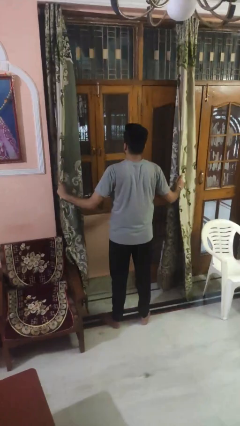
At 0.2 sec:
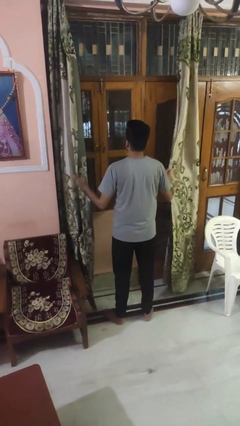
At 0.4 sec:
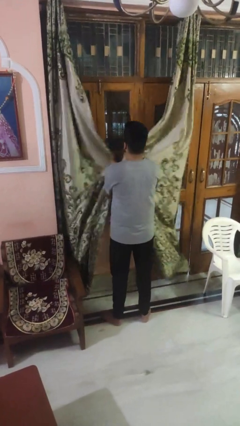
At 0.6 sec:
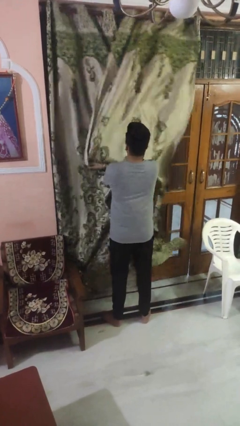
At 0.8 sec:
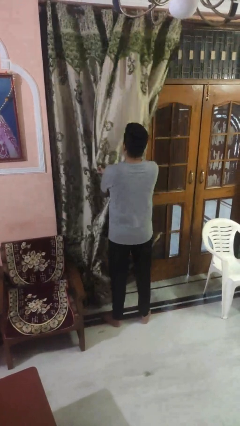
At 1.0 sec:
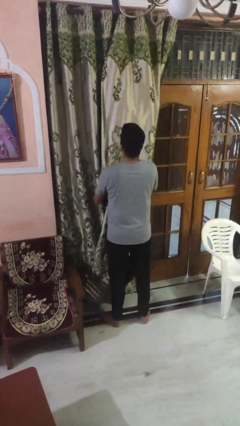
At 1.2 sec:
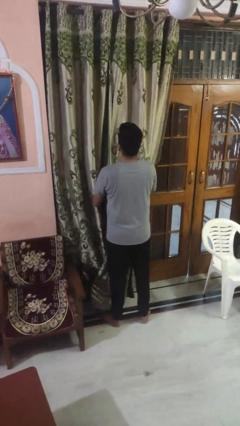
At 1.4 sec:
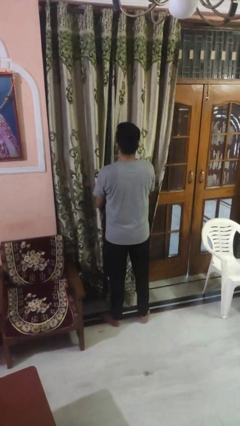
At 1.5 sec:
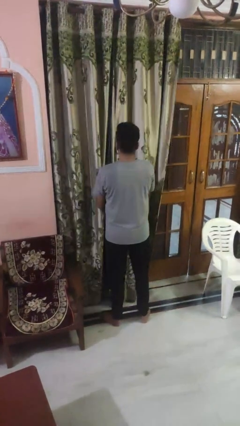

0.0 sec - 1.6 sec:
person closes curtains

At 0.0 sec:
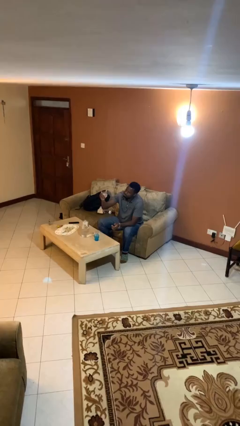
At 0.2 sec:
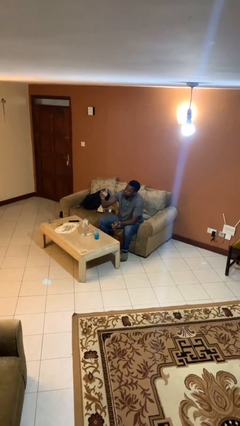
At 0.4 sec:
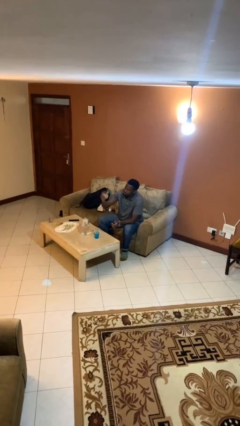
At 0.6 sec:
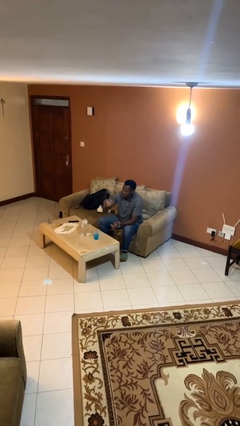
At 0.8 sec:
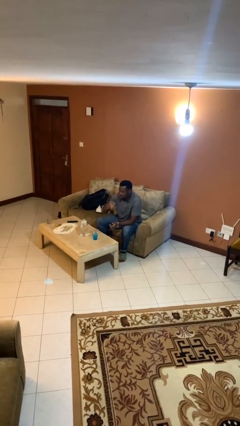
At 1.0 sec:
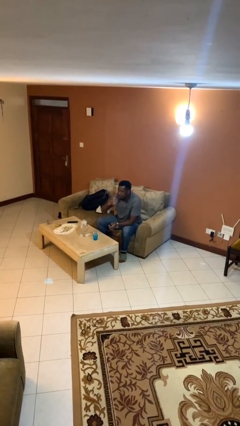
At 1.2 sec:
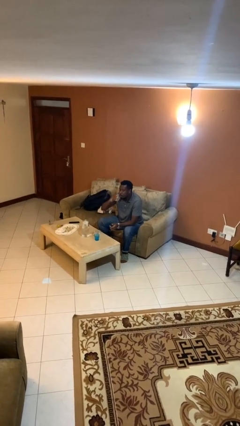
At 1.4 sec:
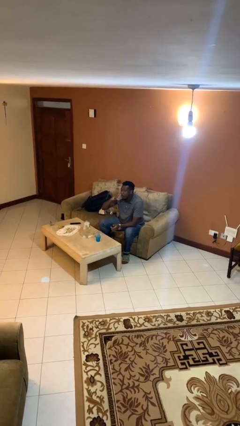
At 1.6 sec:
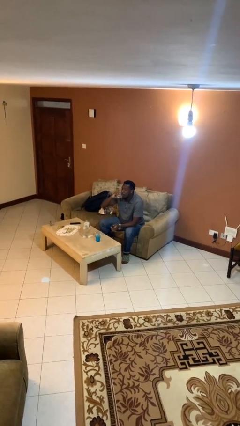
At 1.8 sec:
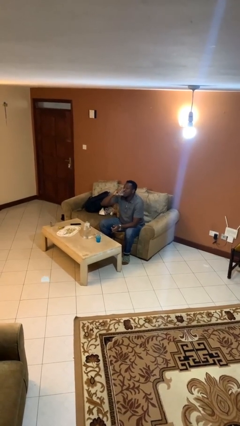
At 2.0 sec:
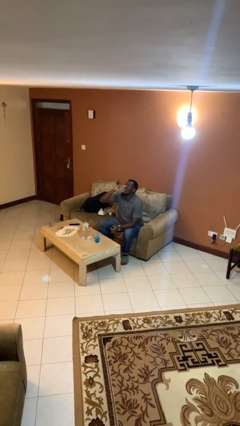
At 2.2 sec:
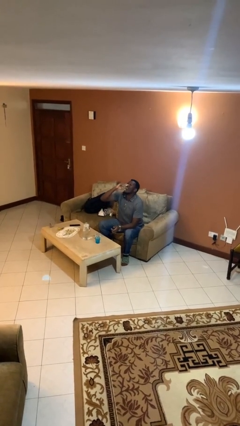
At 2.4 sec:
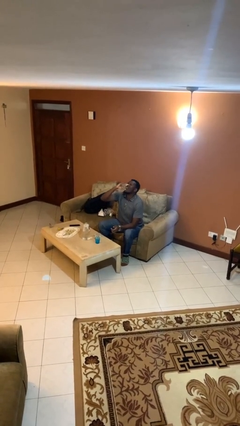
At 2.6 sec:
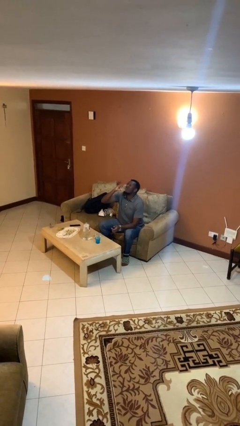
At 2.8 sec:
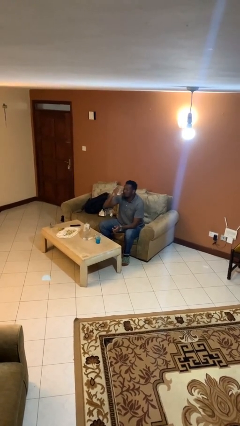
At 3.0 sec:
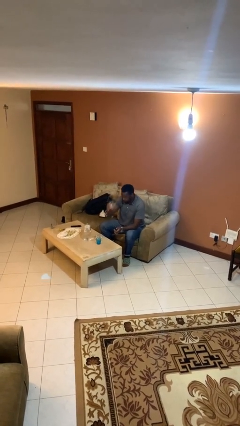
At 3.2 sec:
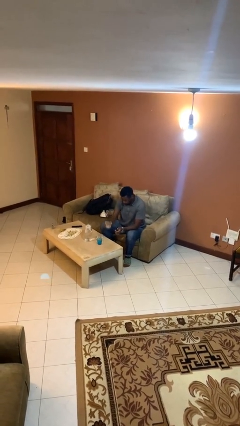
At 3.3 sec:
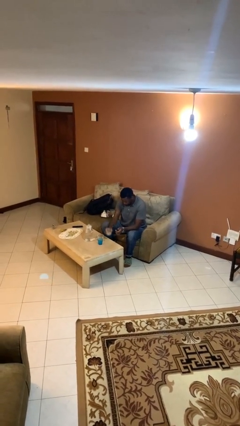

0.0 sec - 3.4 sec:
person drinks from shotglass

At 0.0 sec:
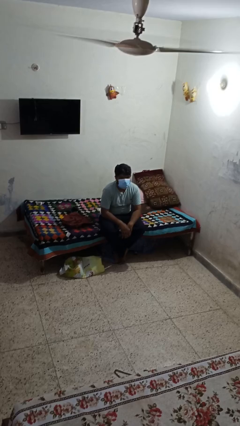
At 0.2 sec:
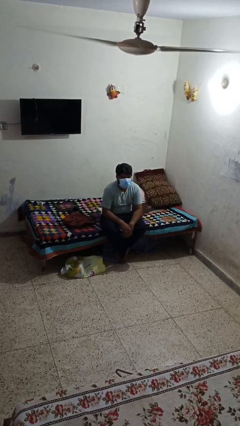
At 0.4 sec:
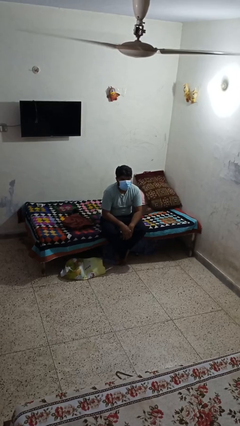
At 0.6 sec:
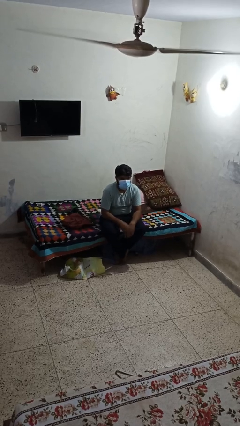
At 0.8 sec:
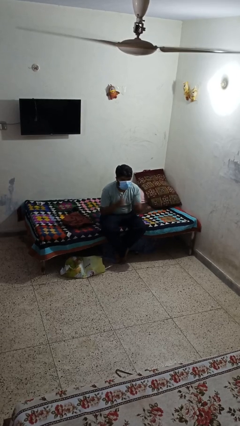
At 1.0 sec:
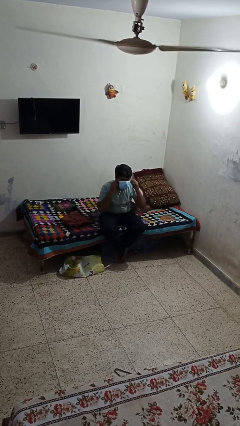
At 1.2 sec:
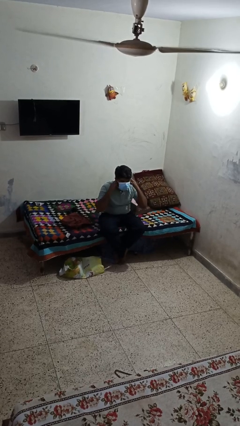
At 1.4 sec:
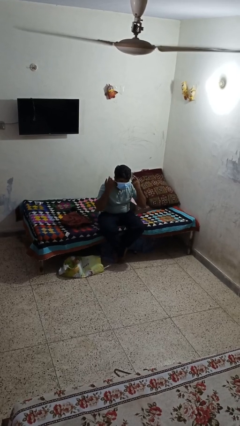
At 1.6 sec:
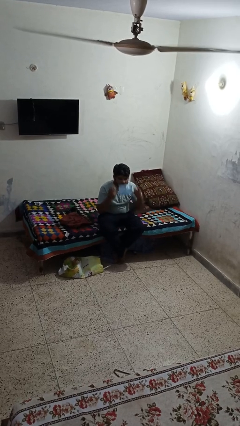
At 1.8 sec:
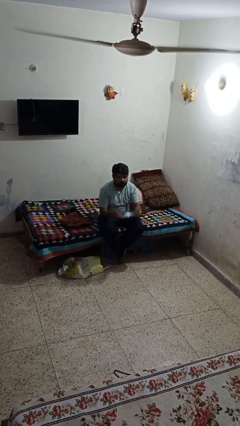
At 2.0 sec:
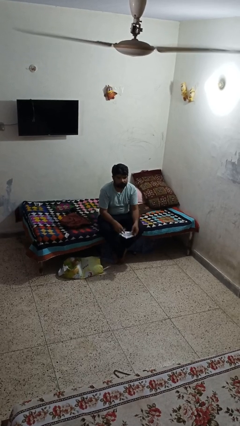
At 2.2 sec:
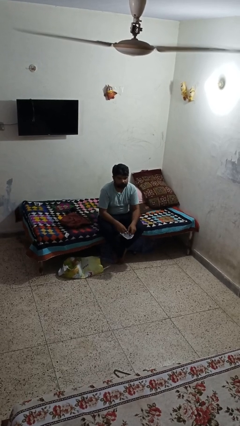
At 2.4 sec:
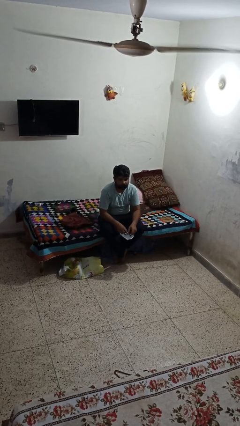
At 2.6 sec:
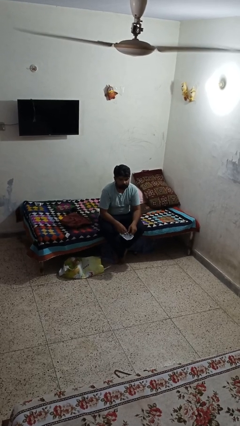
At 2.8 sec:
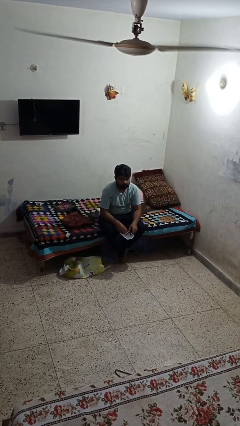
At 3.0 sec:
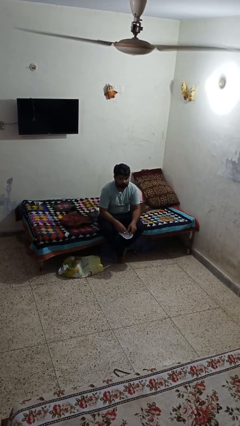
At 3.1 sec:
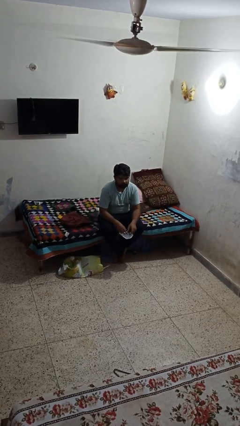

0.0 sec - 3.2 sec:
person takes off facemask

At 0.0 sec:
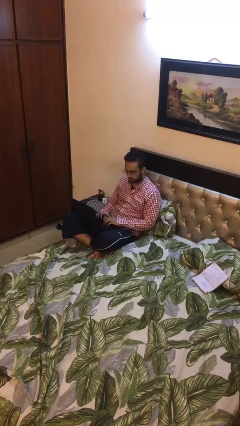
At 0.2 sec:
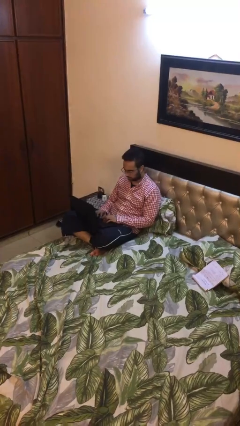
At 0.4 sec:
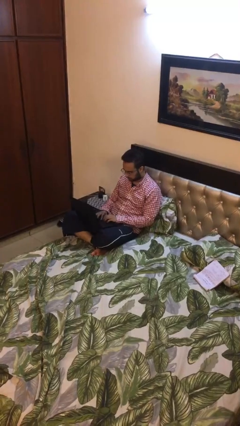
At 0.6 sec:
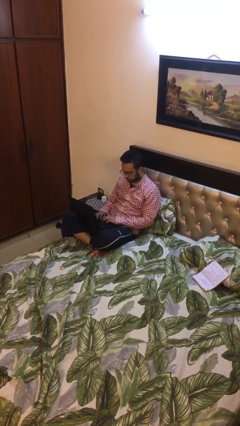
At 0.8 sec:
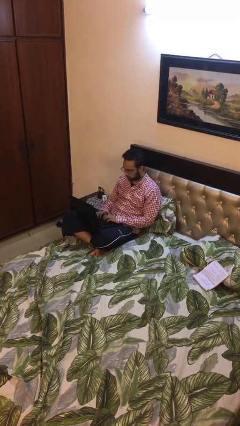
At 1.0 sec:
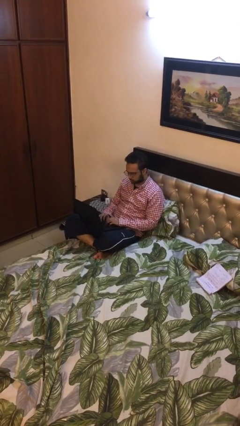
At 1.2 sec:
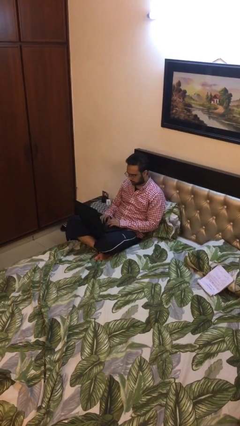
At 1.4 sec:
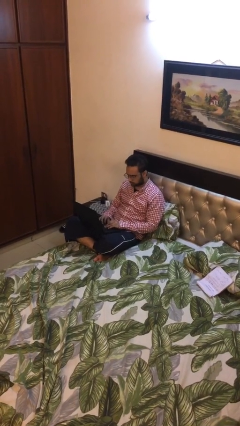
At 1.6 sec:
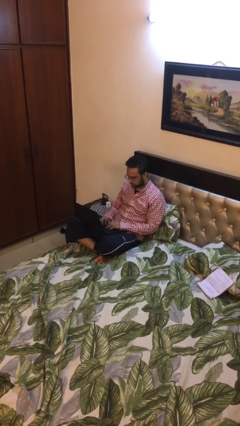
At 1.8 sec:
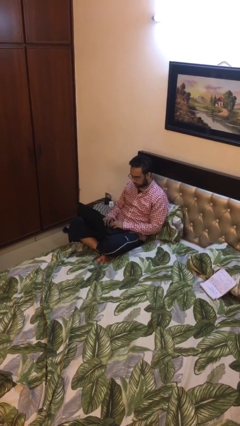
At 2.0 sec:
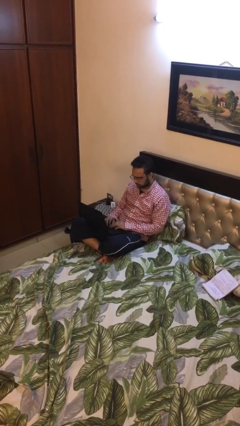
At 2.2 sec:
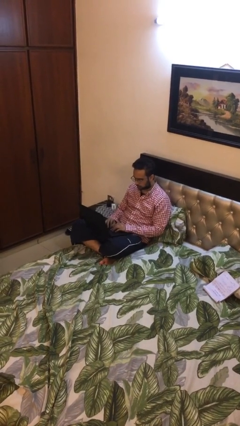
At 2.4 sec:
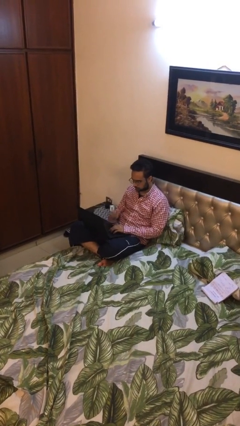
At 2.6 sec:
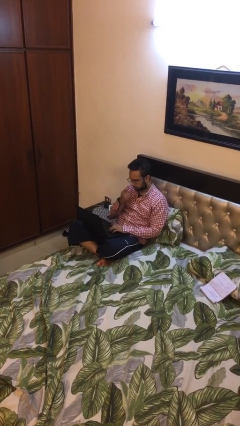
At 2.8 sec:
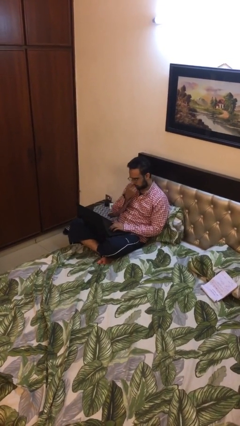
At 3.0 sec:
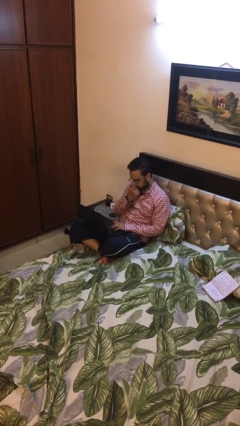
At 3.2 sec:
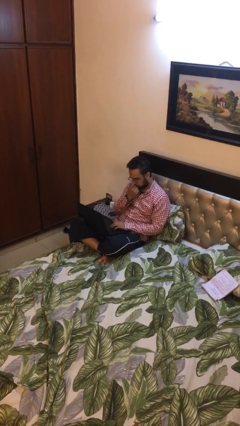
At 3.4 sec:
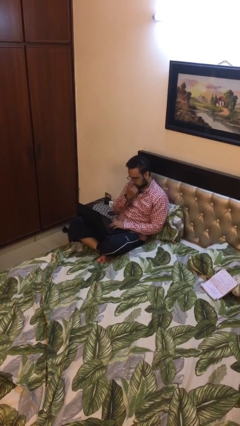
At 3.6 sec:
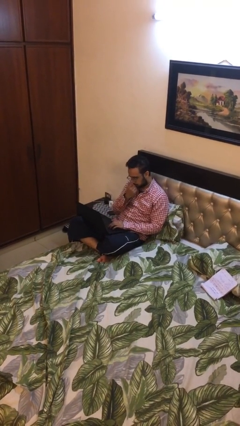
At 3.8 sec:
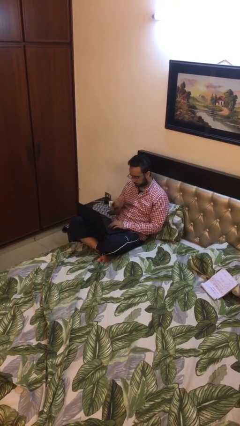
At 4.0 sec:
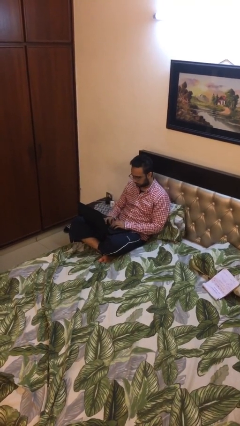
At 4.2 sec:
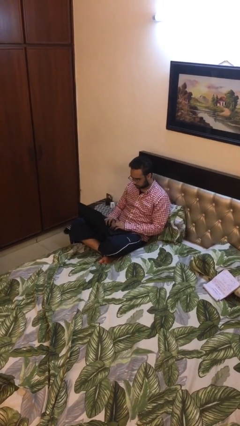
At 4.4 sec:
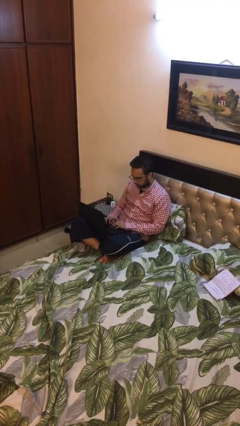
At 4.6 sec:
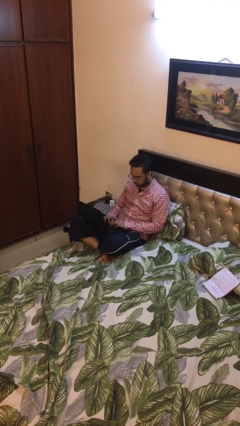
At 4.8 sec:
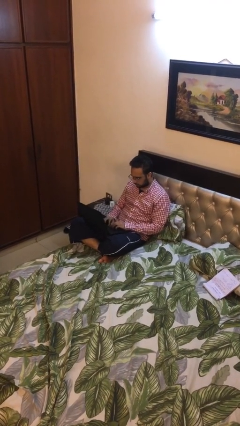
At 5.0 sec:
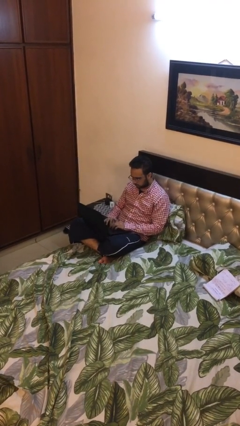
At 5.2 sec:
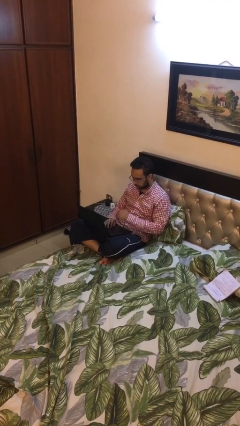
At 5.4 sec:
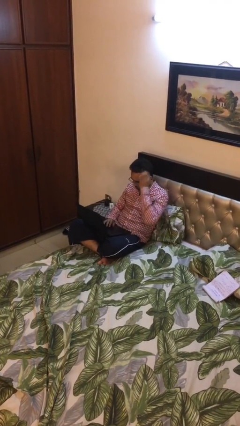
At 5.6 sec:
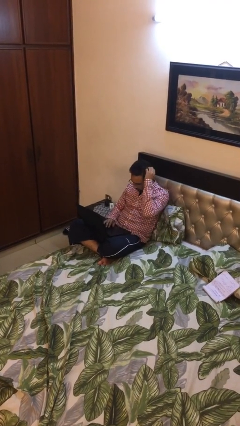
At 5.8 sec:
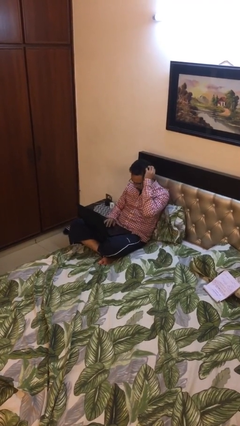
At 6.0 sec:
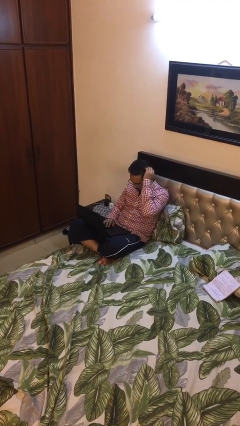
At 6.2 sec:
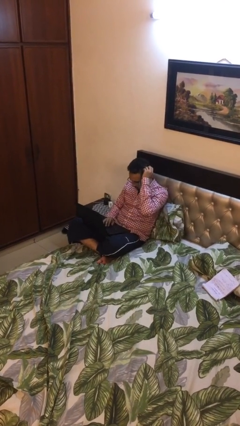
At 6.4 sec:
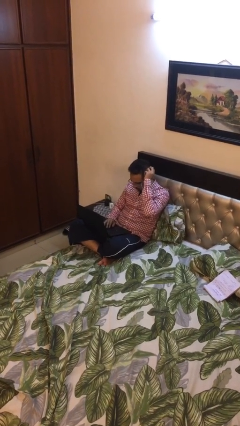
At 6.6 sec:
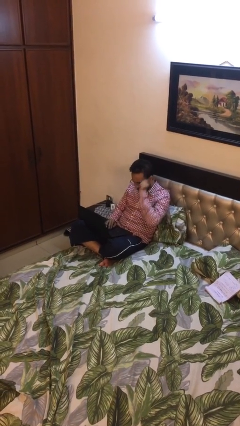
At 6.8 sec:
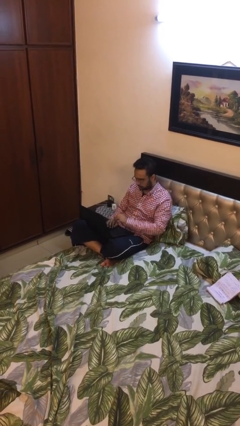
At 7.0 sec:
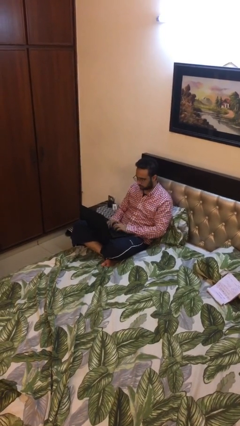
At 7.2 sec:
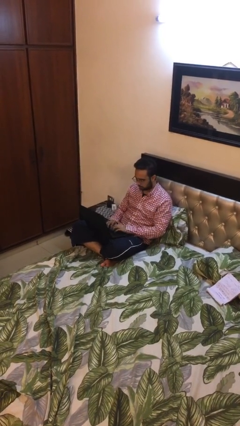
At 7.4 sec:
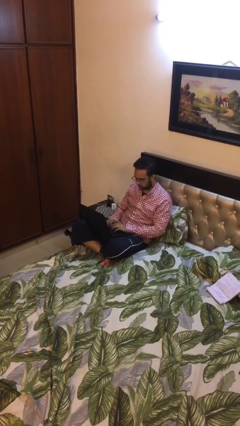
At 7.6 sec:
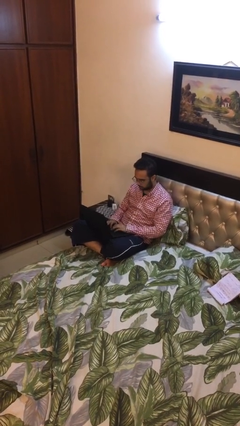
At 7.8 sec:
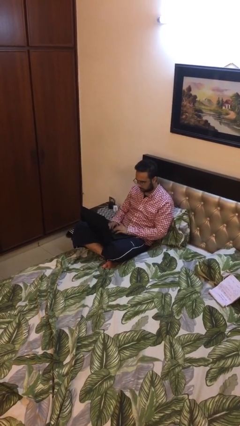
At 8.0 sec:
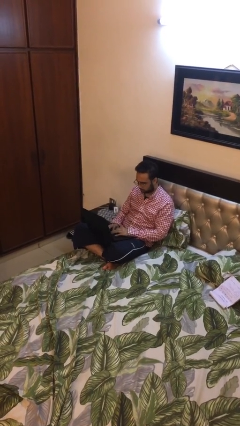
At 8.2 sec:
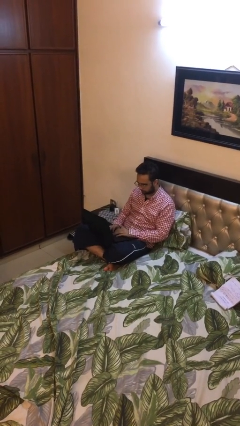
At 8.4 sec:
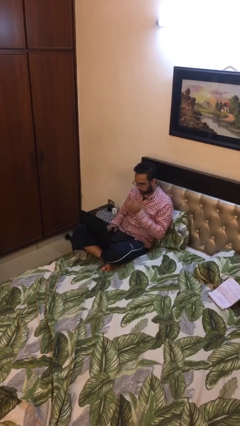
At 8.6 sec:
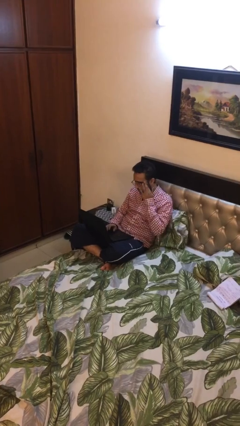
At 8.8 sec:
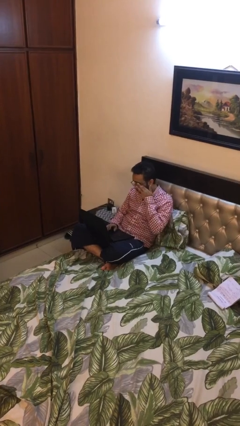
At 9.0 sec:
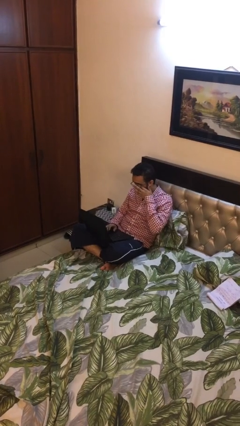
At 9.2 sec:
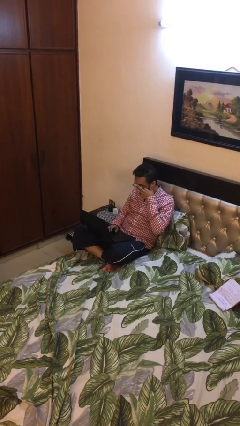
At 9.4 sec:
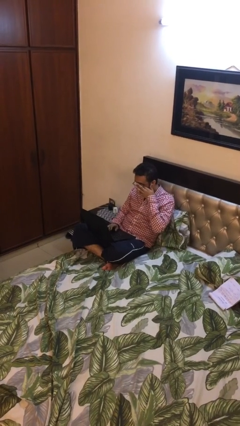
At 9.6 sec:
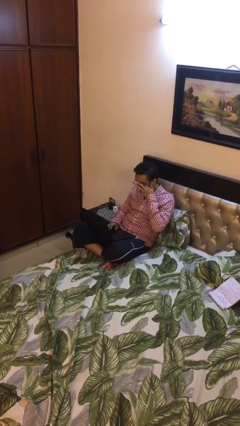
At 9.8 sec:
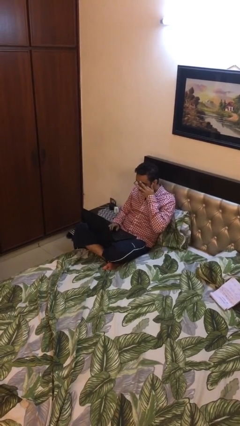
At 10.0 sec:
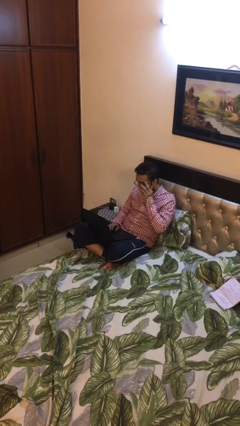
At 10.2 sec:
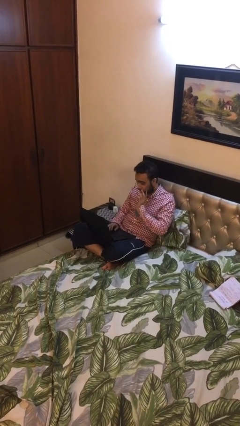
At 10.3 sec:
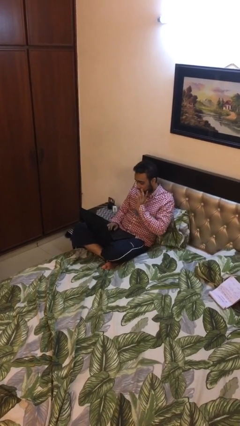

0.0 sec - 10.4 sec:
person interacts with laptop
